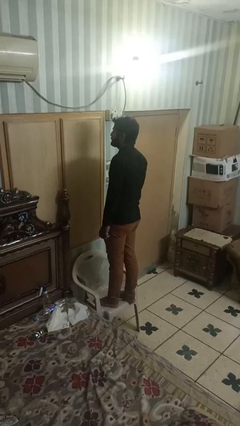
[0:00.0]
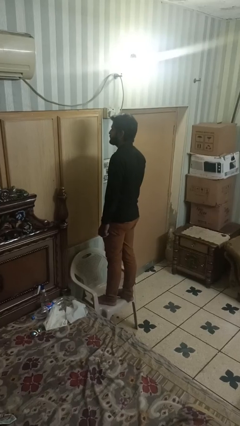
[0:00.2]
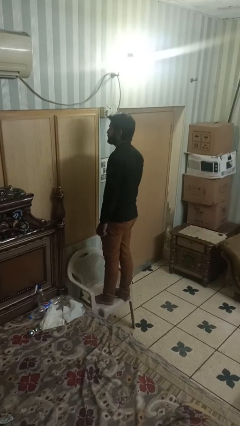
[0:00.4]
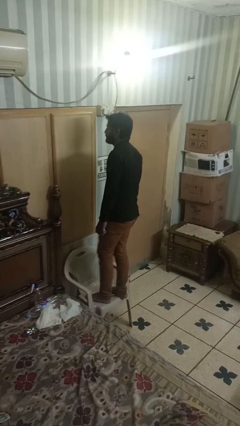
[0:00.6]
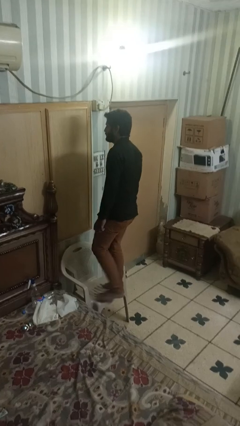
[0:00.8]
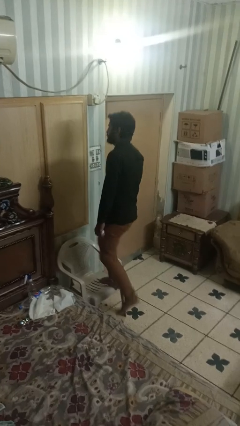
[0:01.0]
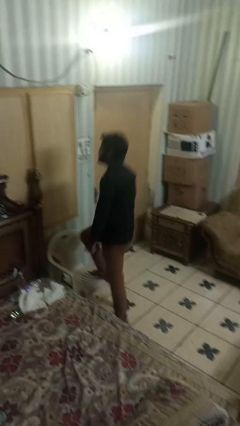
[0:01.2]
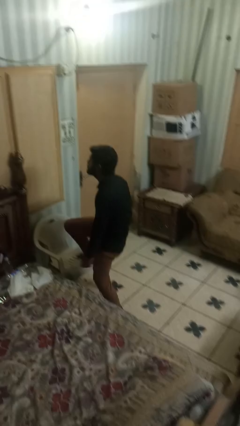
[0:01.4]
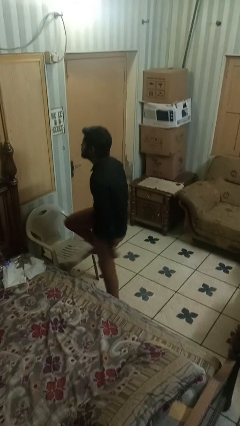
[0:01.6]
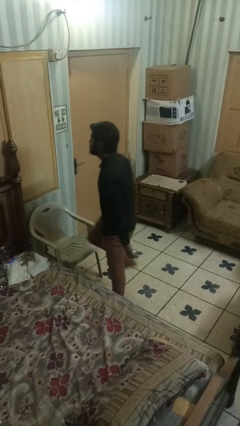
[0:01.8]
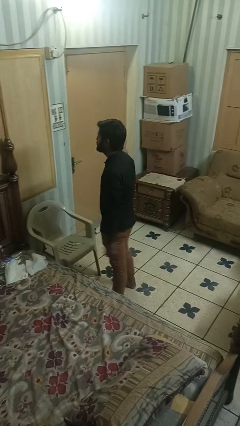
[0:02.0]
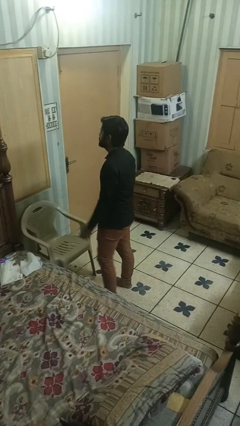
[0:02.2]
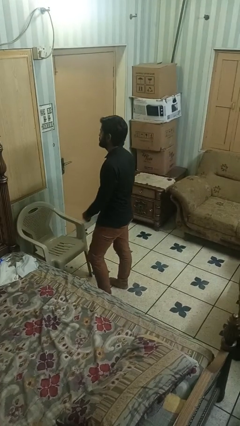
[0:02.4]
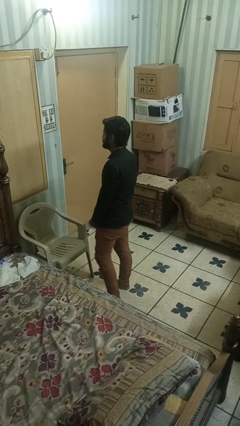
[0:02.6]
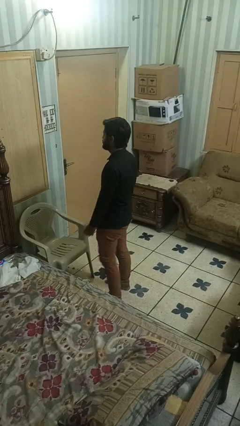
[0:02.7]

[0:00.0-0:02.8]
person climbs off chair

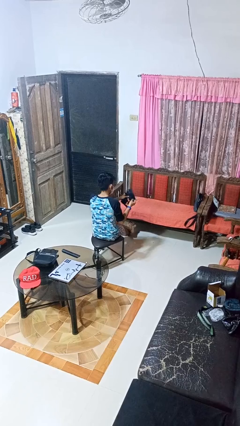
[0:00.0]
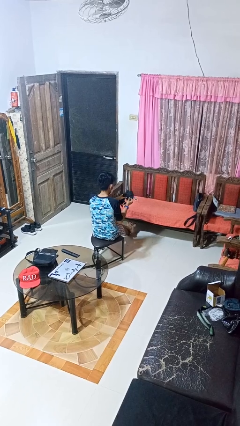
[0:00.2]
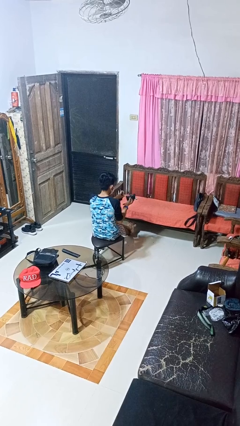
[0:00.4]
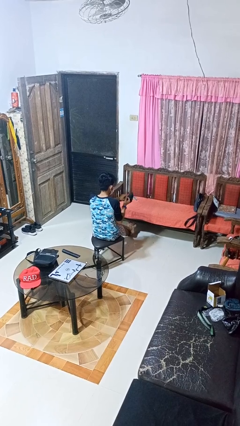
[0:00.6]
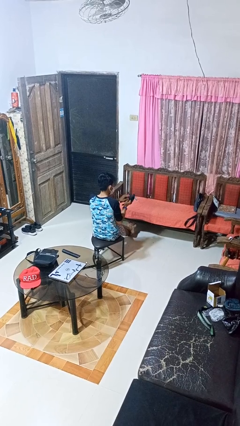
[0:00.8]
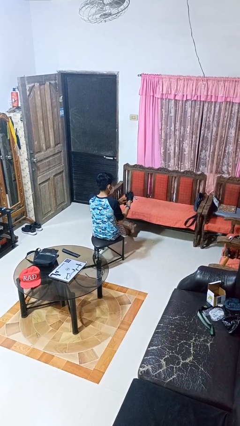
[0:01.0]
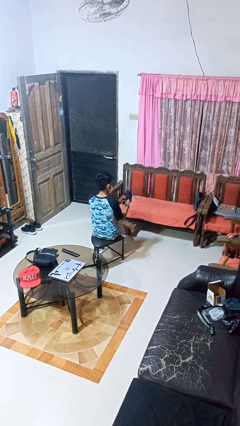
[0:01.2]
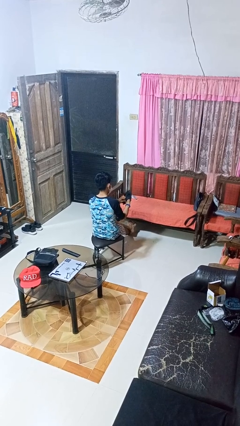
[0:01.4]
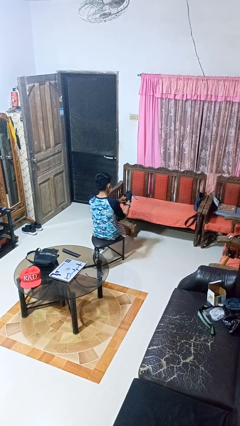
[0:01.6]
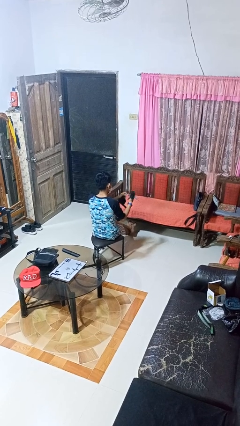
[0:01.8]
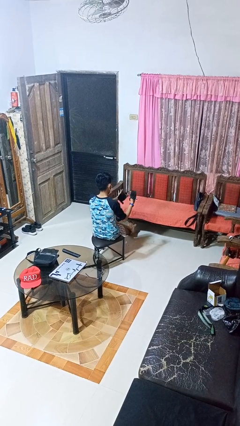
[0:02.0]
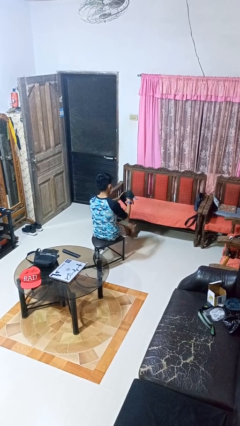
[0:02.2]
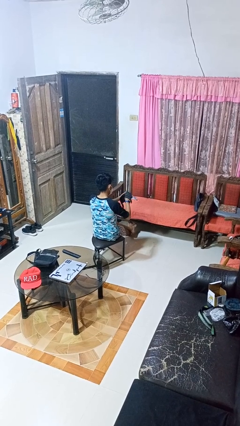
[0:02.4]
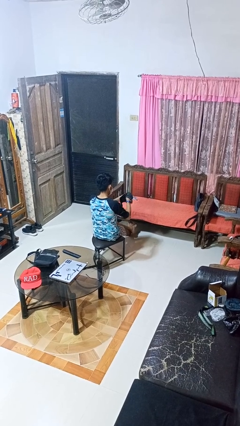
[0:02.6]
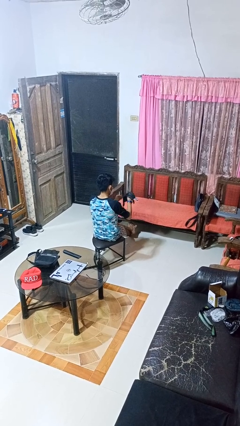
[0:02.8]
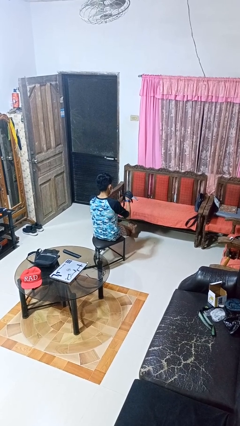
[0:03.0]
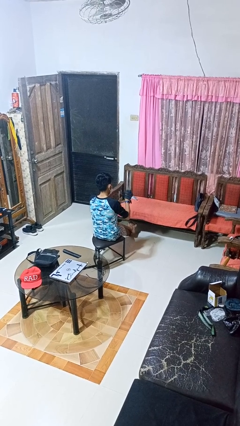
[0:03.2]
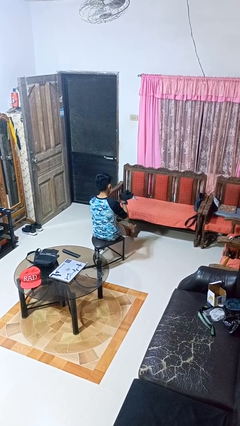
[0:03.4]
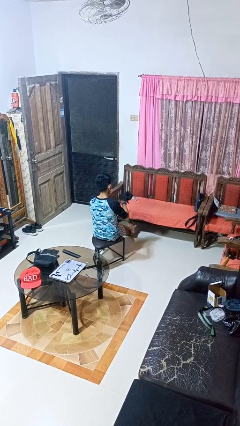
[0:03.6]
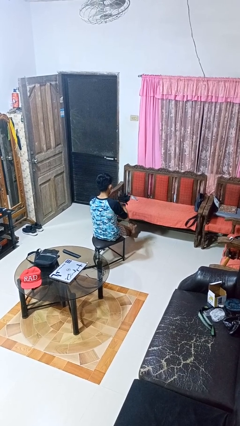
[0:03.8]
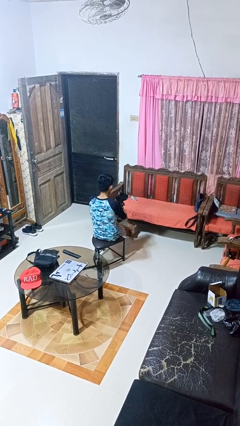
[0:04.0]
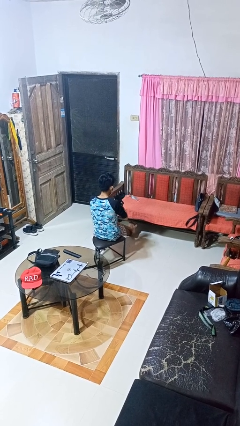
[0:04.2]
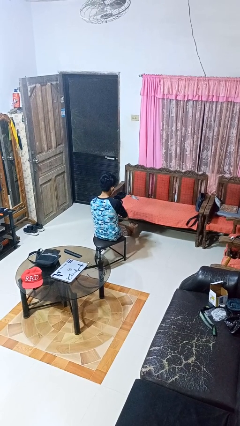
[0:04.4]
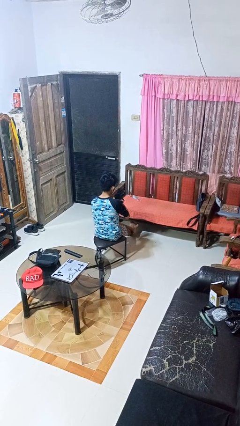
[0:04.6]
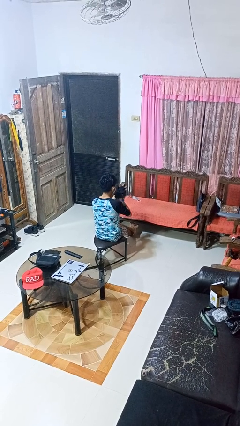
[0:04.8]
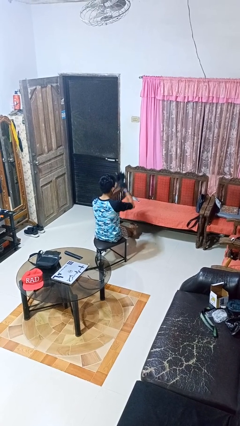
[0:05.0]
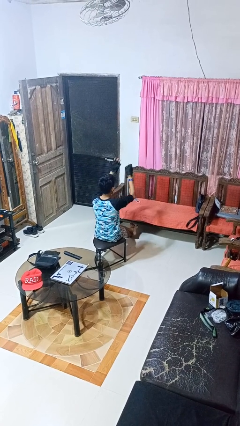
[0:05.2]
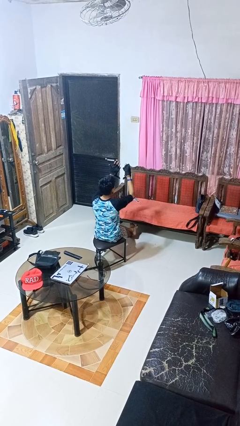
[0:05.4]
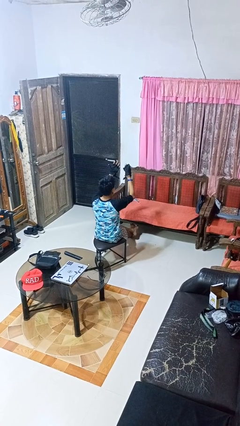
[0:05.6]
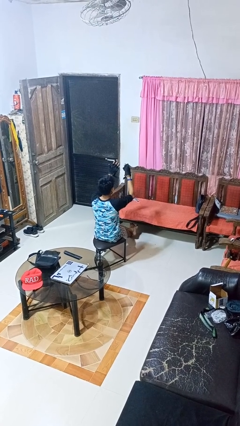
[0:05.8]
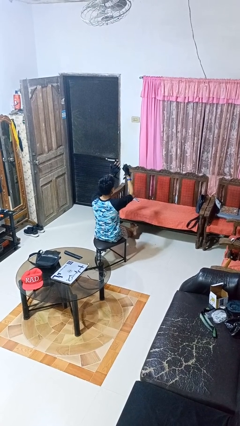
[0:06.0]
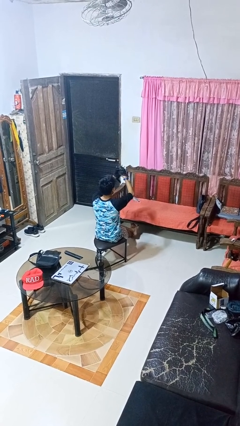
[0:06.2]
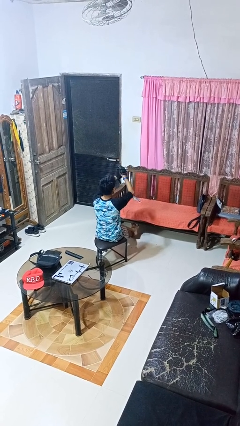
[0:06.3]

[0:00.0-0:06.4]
person puts on gloves

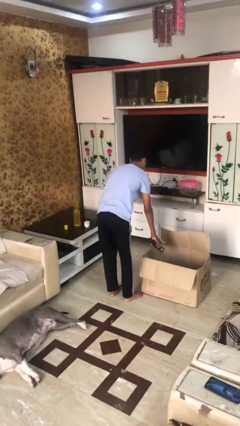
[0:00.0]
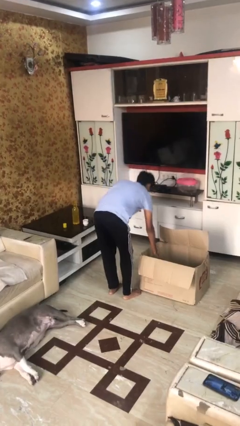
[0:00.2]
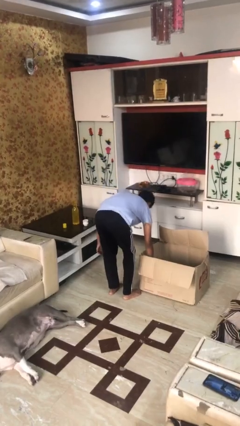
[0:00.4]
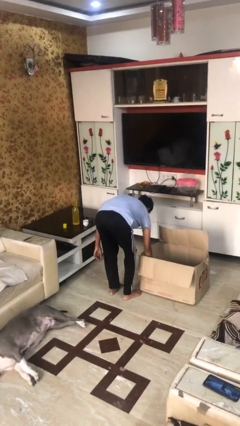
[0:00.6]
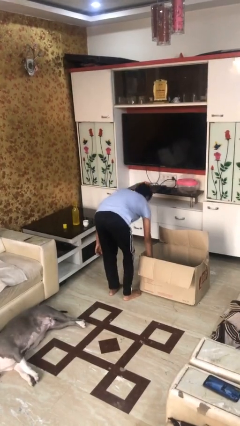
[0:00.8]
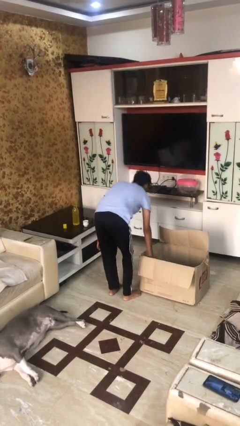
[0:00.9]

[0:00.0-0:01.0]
person puts object into box

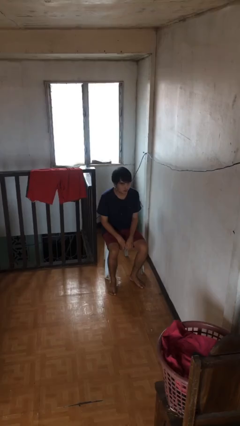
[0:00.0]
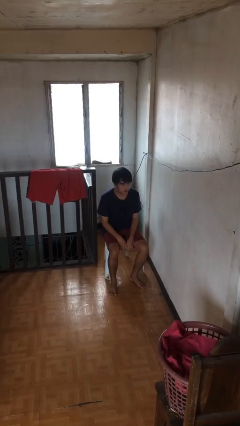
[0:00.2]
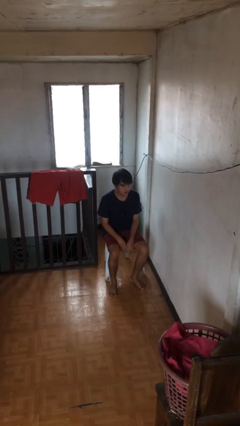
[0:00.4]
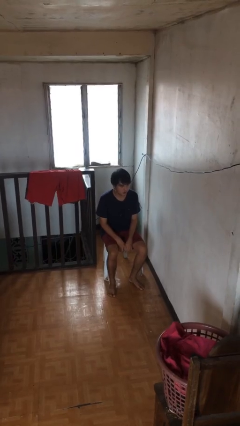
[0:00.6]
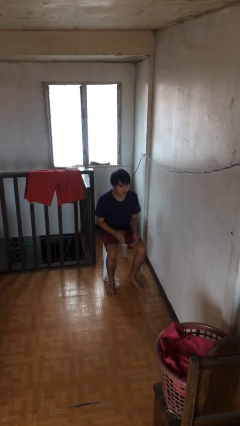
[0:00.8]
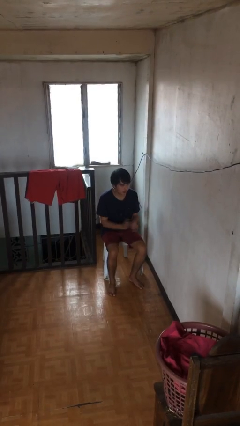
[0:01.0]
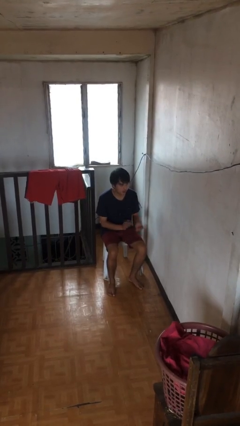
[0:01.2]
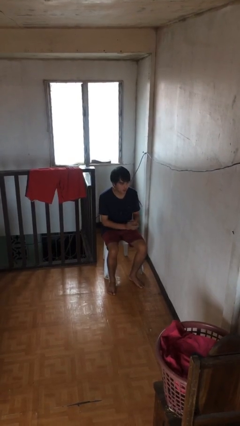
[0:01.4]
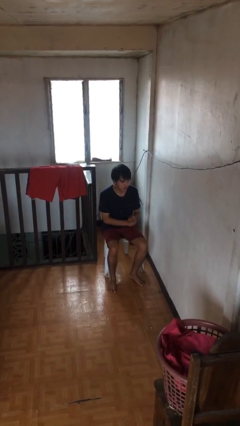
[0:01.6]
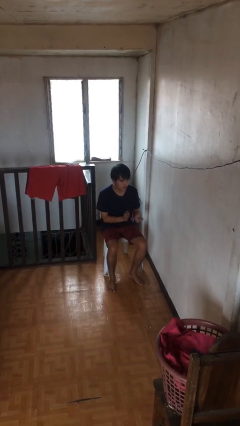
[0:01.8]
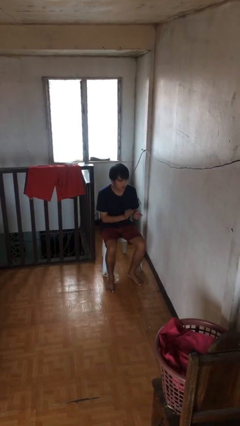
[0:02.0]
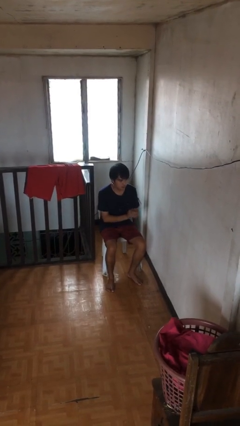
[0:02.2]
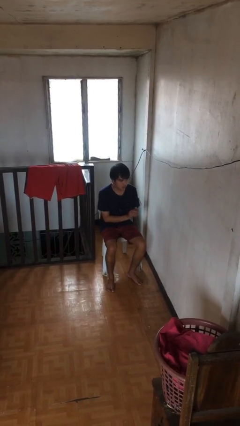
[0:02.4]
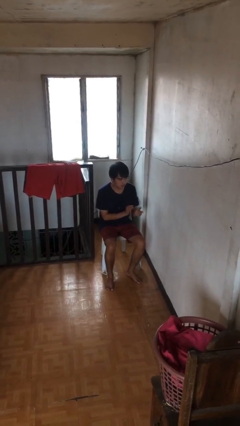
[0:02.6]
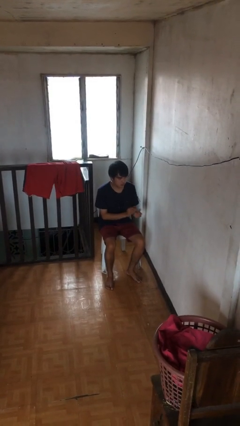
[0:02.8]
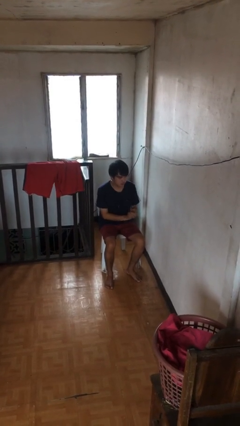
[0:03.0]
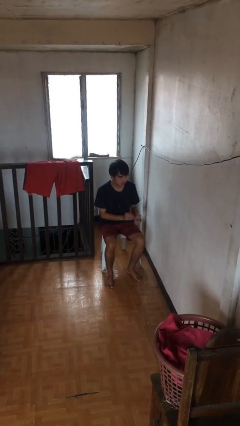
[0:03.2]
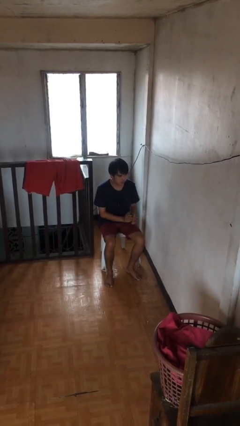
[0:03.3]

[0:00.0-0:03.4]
person claps hands

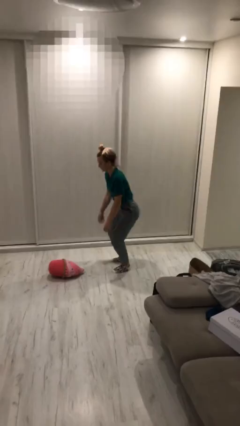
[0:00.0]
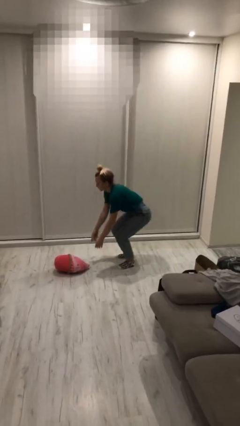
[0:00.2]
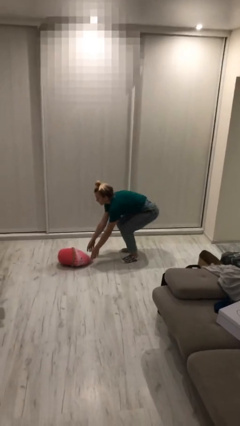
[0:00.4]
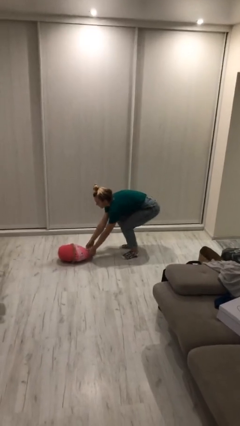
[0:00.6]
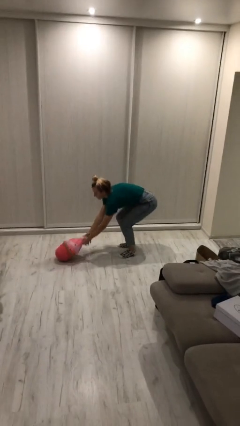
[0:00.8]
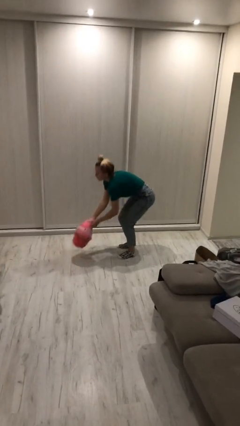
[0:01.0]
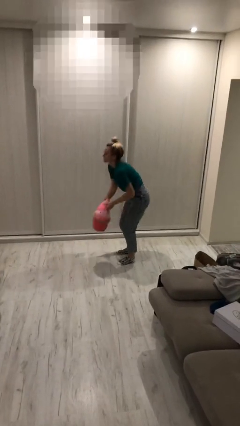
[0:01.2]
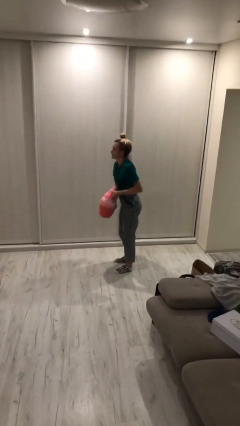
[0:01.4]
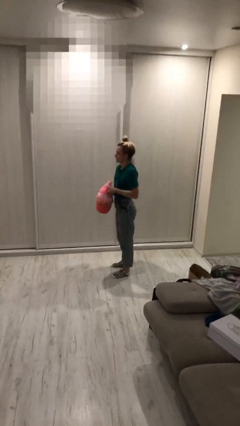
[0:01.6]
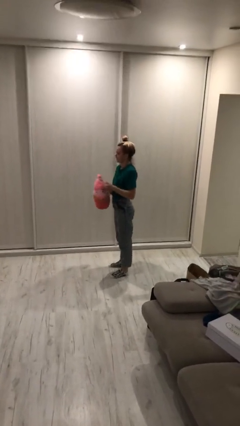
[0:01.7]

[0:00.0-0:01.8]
person picks up object from floor

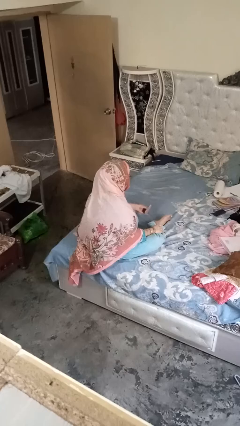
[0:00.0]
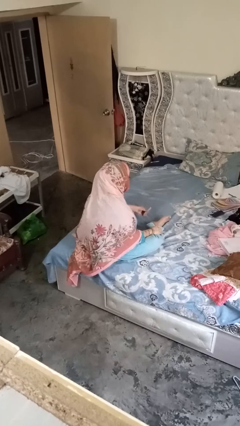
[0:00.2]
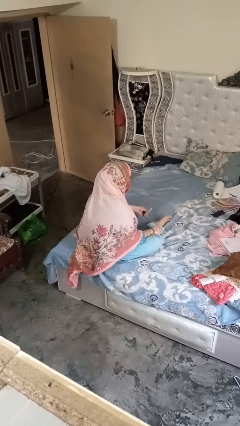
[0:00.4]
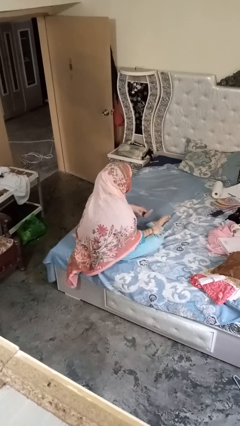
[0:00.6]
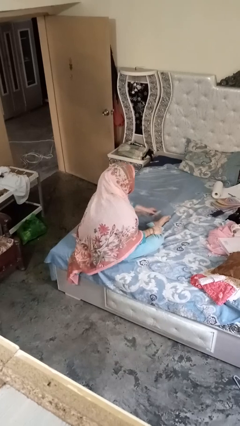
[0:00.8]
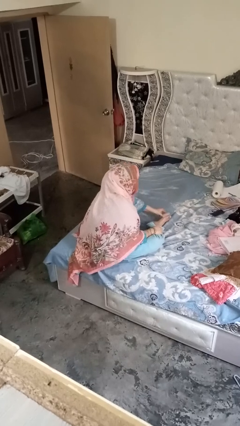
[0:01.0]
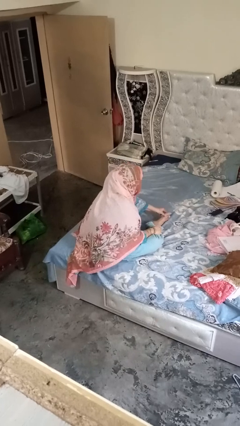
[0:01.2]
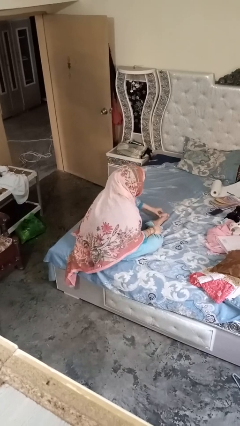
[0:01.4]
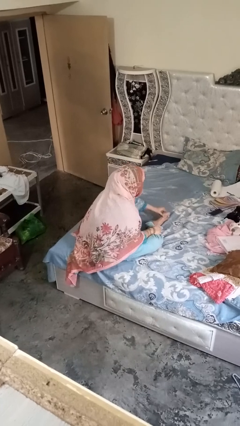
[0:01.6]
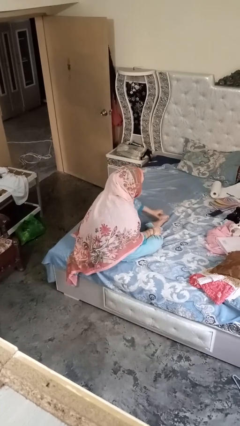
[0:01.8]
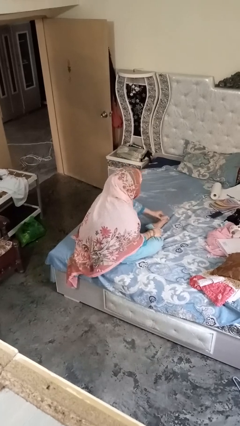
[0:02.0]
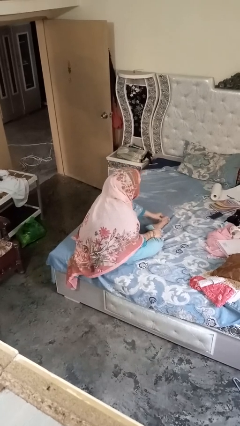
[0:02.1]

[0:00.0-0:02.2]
person rubs foot
